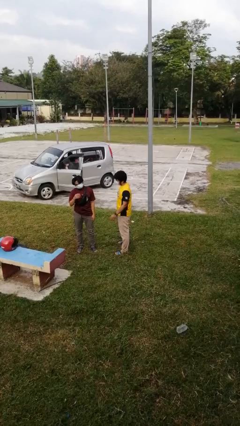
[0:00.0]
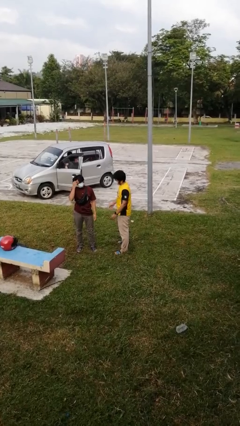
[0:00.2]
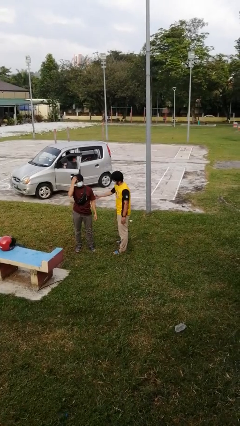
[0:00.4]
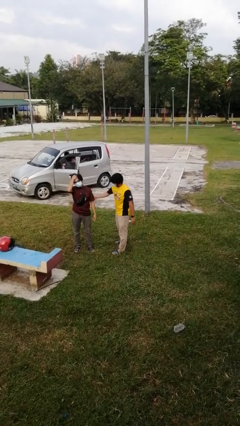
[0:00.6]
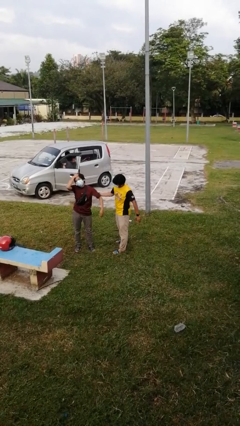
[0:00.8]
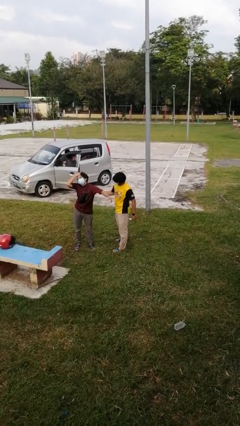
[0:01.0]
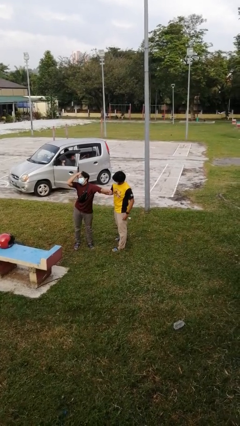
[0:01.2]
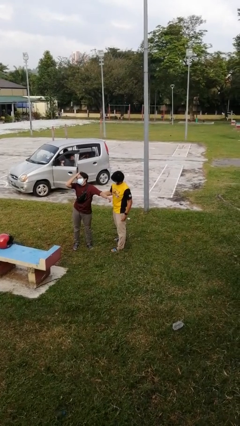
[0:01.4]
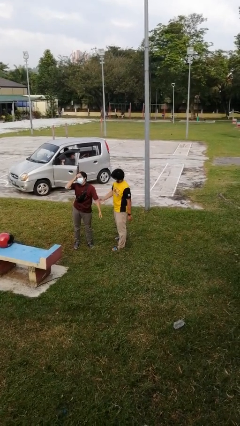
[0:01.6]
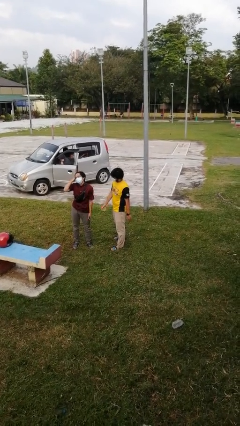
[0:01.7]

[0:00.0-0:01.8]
person grabs person by bicep

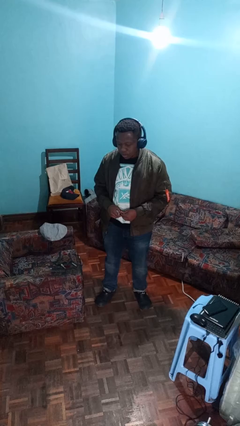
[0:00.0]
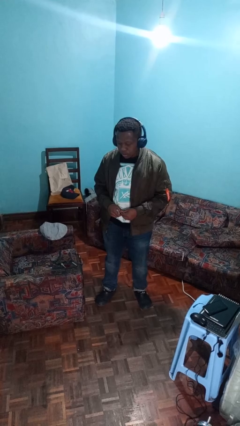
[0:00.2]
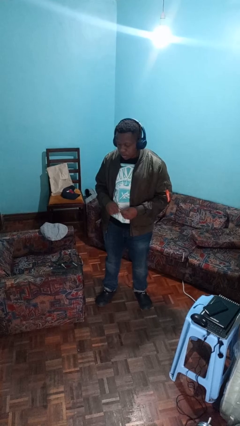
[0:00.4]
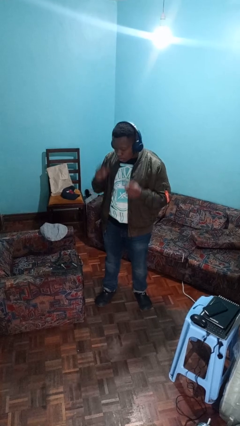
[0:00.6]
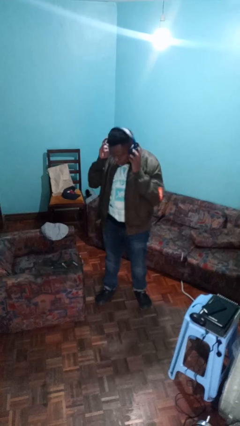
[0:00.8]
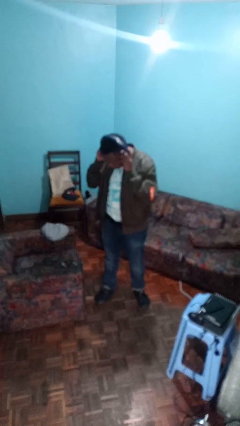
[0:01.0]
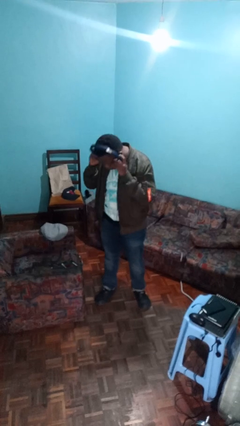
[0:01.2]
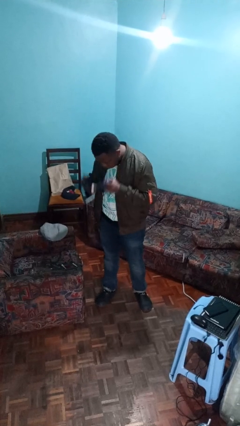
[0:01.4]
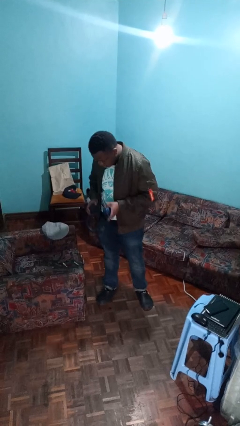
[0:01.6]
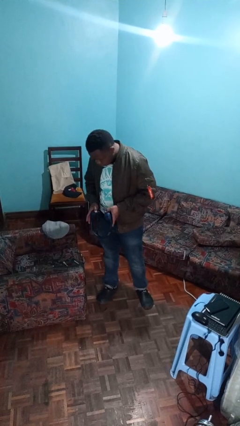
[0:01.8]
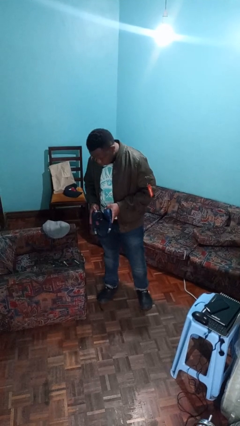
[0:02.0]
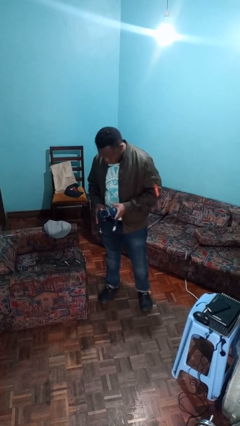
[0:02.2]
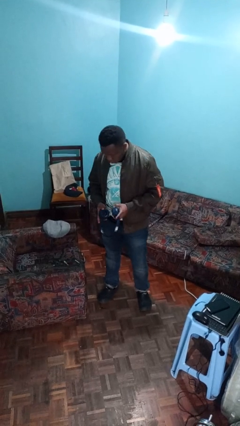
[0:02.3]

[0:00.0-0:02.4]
person takes off headphones

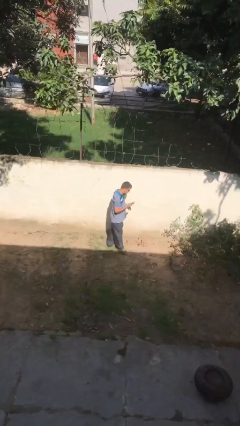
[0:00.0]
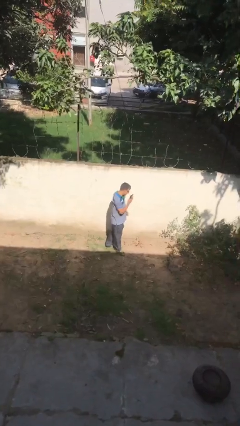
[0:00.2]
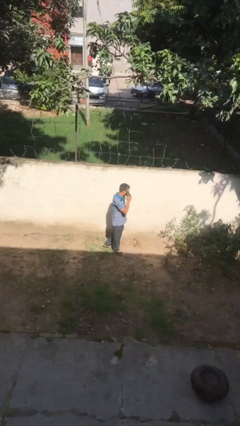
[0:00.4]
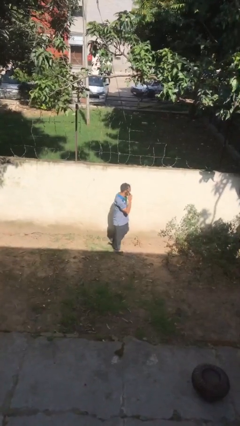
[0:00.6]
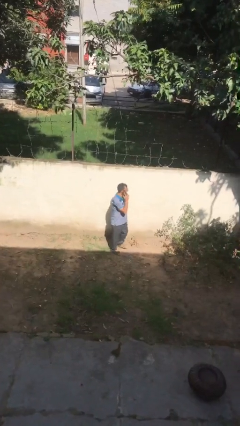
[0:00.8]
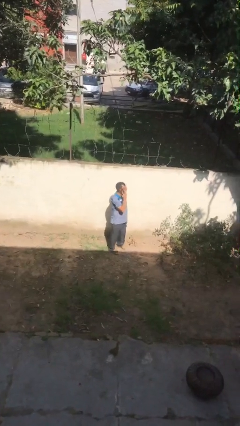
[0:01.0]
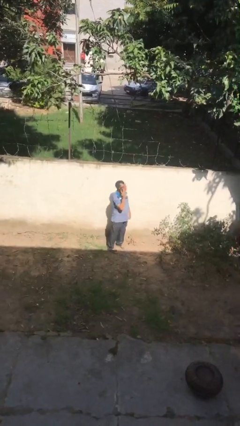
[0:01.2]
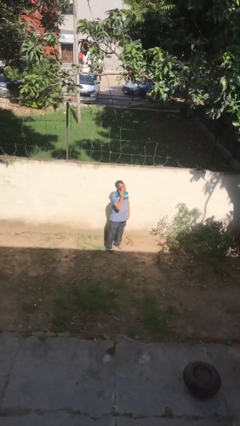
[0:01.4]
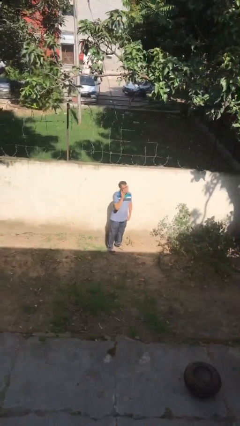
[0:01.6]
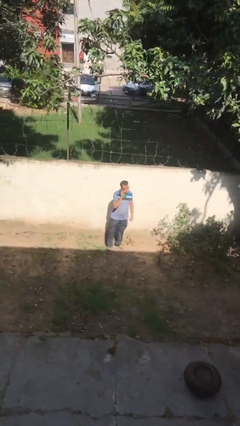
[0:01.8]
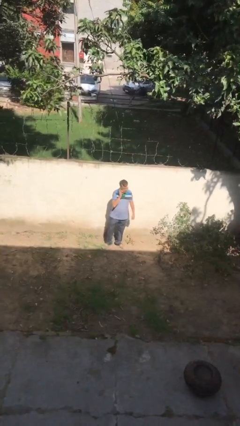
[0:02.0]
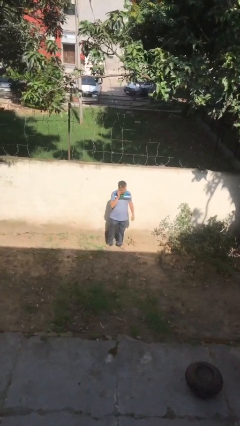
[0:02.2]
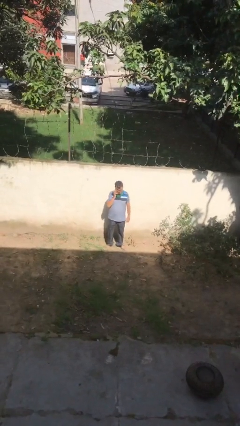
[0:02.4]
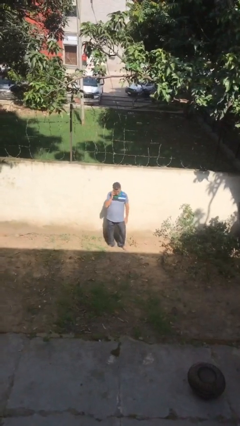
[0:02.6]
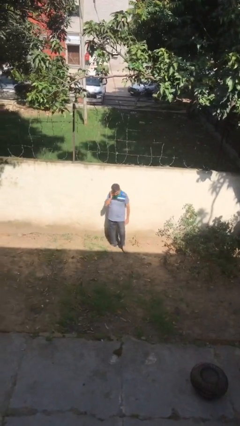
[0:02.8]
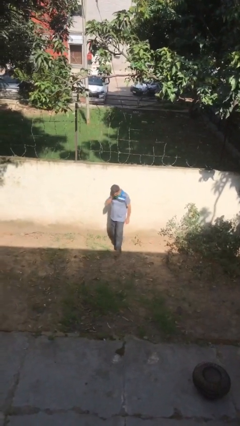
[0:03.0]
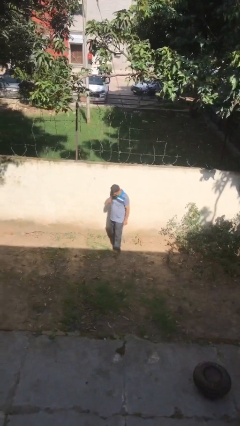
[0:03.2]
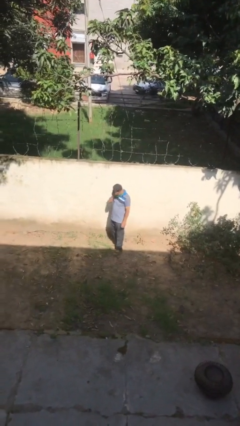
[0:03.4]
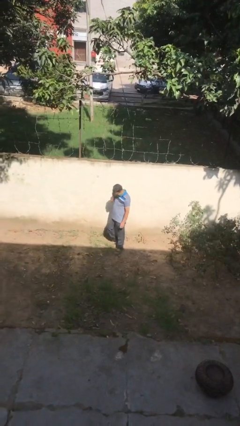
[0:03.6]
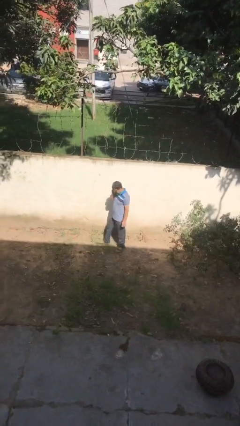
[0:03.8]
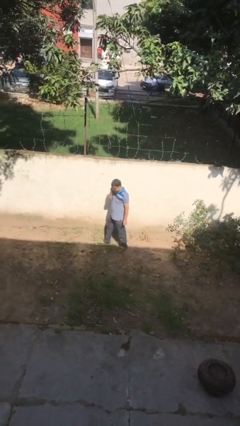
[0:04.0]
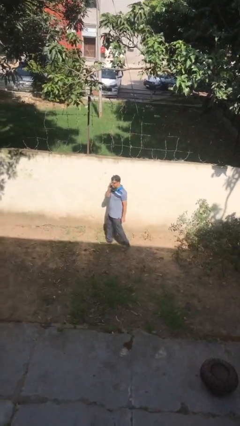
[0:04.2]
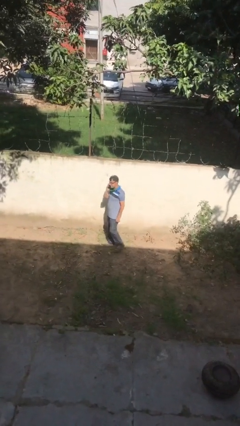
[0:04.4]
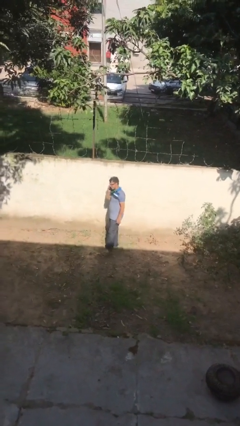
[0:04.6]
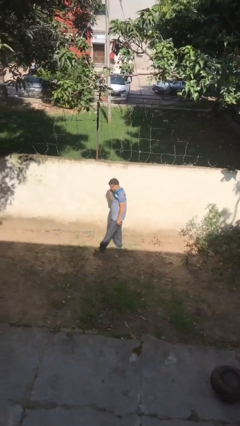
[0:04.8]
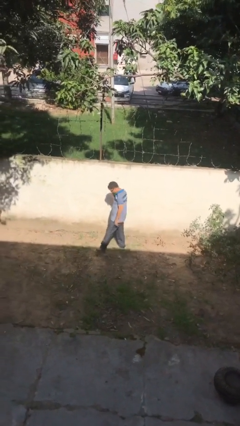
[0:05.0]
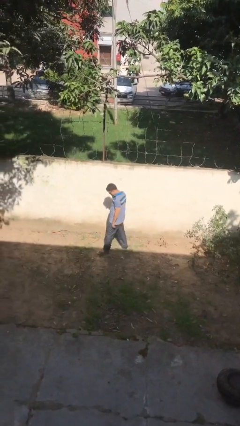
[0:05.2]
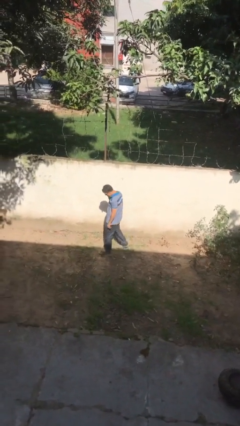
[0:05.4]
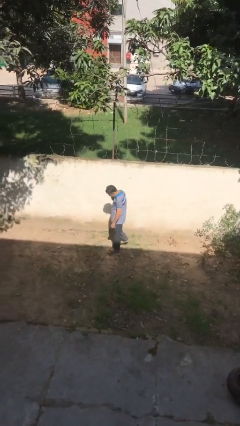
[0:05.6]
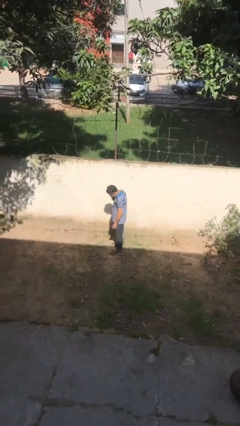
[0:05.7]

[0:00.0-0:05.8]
person talks on phone

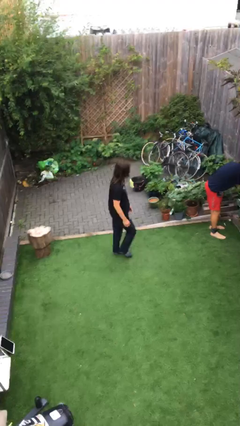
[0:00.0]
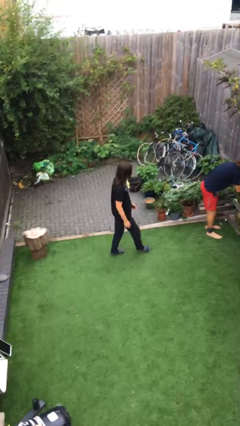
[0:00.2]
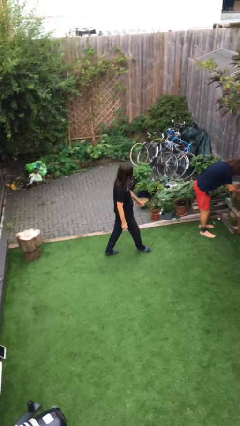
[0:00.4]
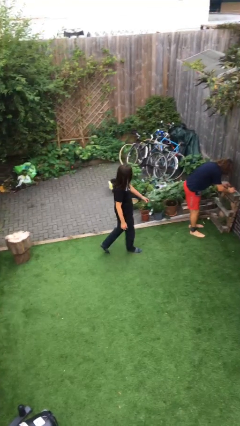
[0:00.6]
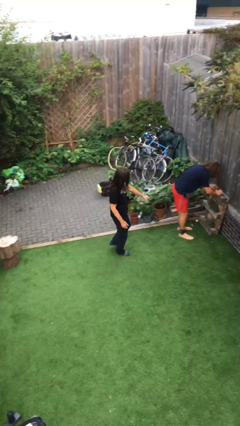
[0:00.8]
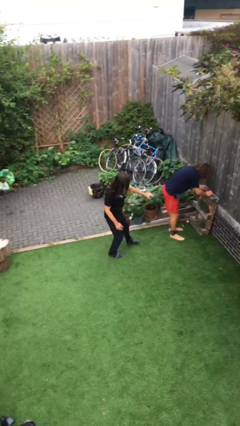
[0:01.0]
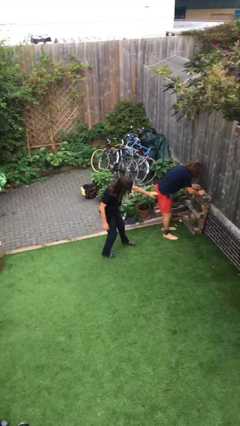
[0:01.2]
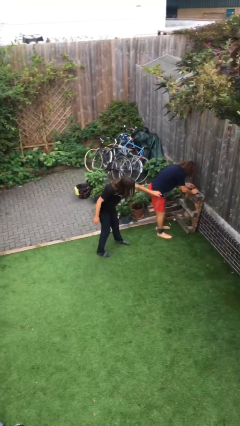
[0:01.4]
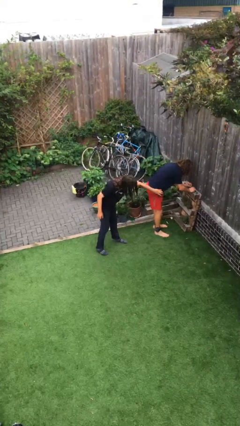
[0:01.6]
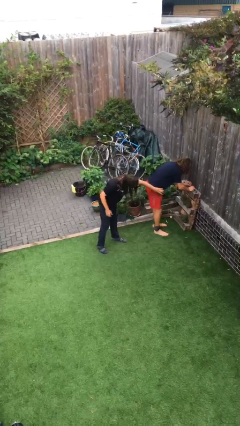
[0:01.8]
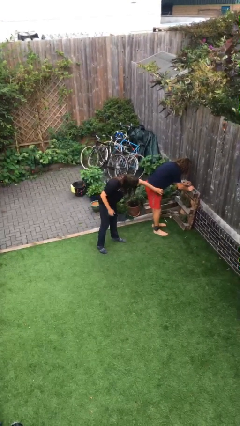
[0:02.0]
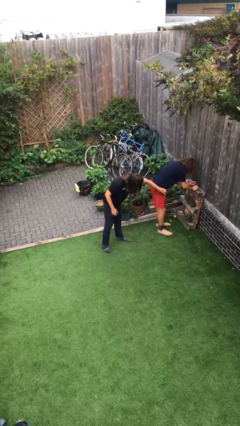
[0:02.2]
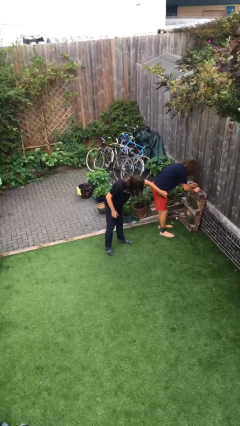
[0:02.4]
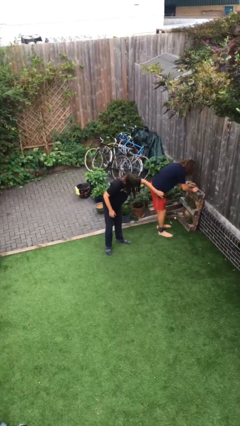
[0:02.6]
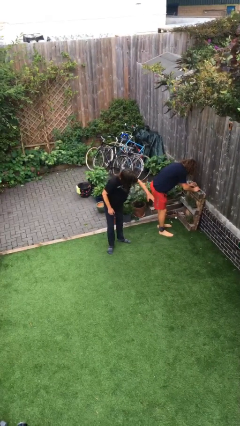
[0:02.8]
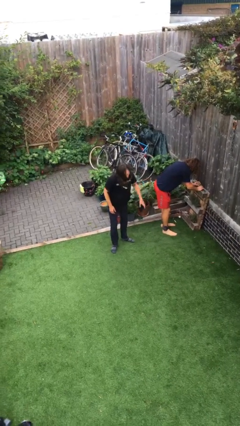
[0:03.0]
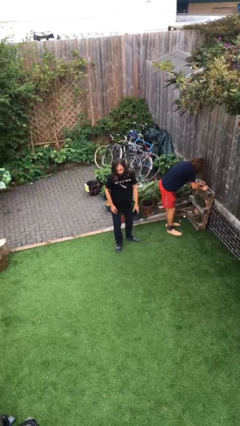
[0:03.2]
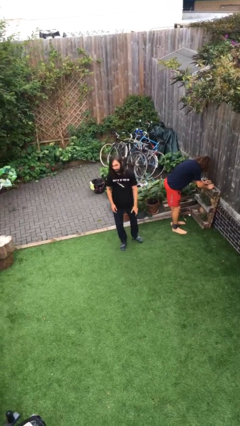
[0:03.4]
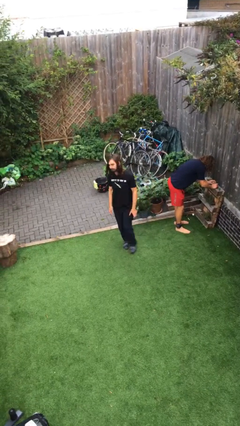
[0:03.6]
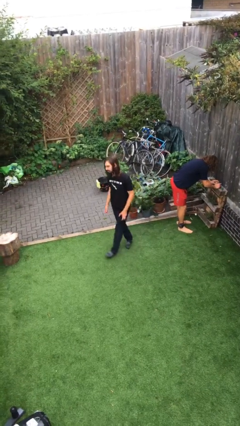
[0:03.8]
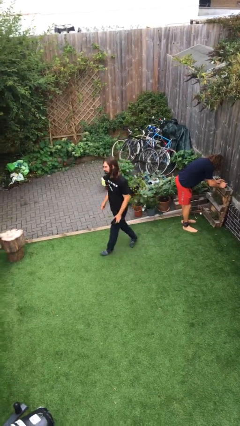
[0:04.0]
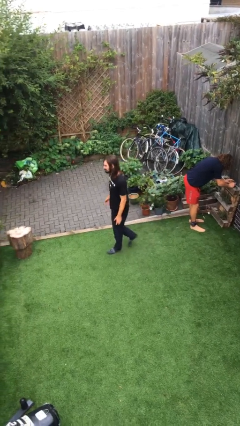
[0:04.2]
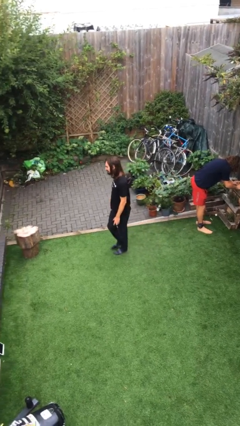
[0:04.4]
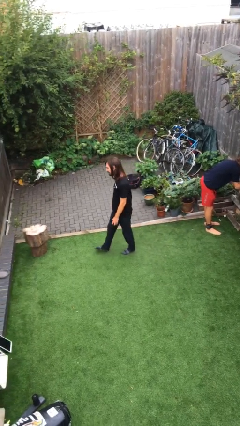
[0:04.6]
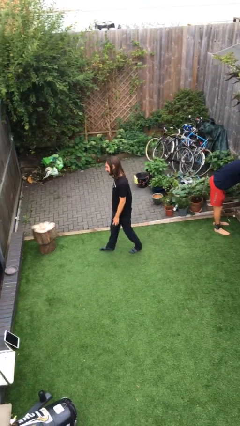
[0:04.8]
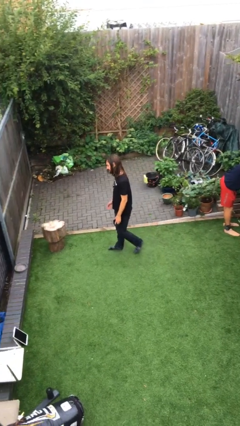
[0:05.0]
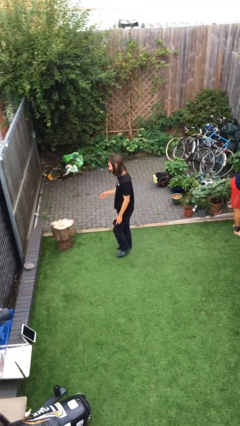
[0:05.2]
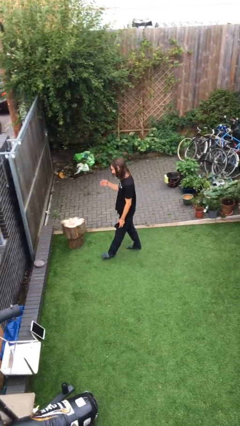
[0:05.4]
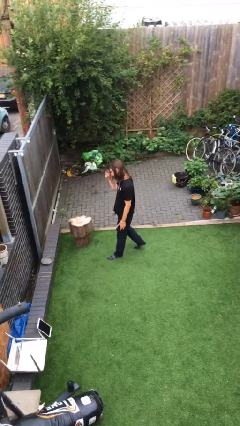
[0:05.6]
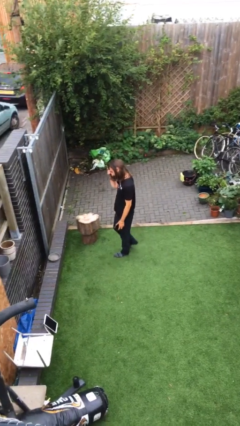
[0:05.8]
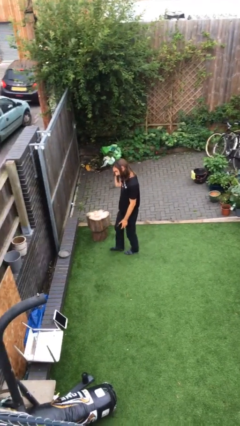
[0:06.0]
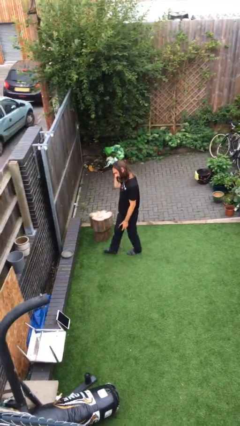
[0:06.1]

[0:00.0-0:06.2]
person steals object from person

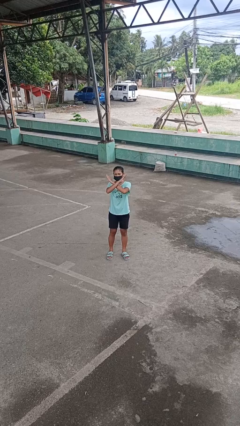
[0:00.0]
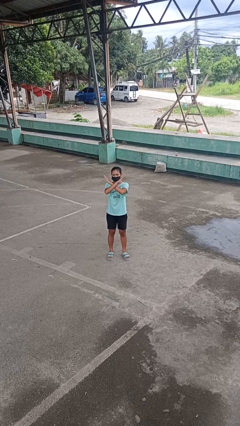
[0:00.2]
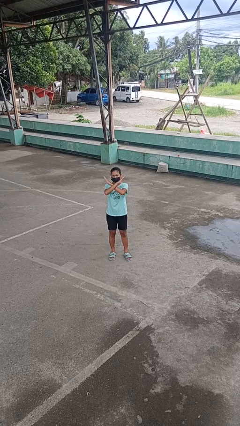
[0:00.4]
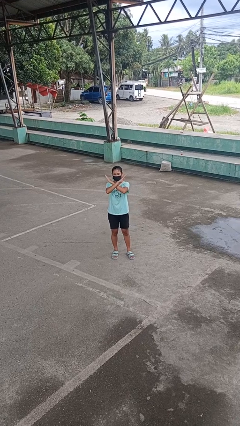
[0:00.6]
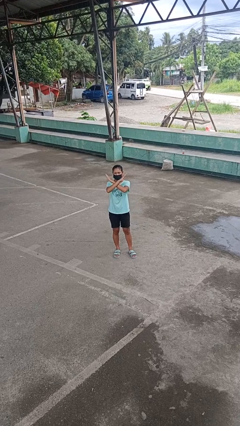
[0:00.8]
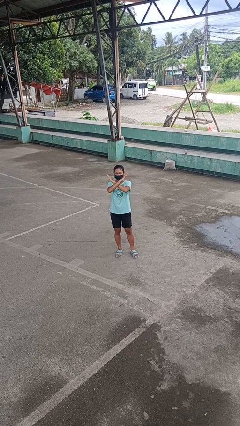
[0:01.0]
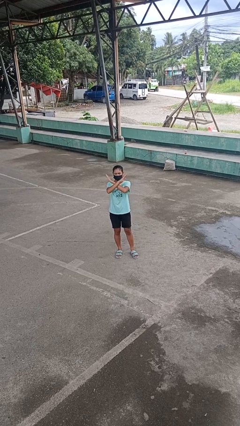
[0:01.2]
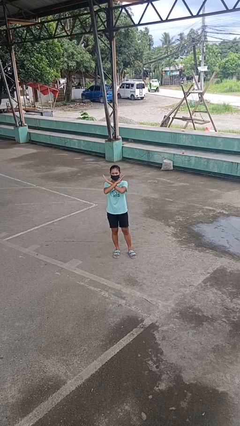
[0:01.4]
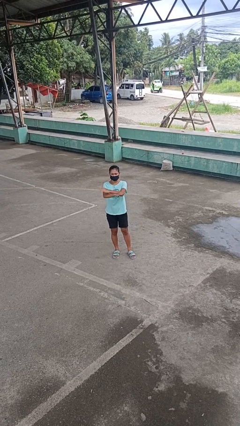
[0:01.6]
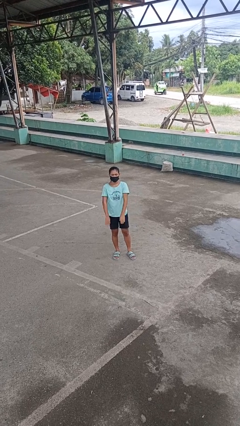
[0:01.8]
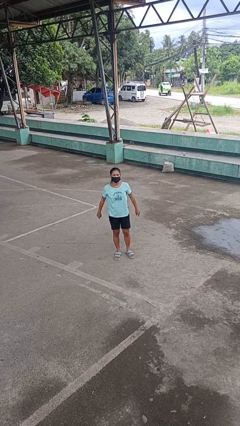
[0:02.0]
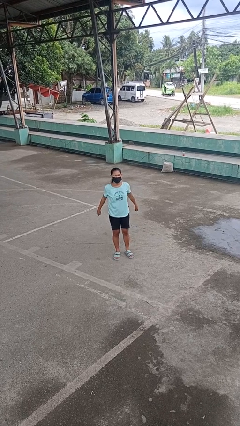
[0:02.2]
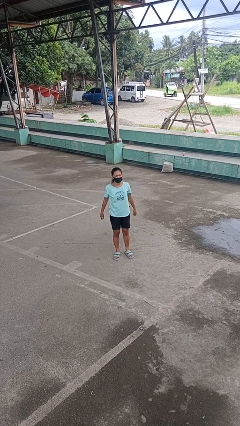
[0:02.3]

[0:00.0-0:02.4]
person gestures arms x
